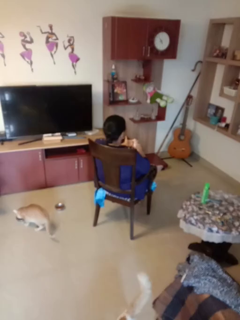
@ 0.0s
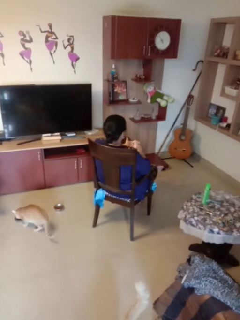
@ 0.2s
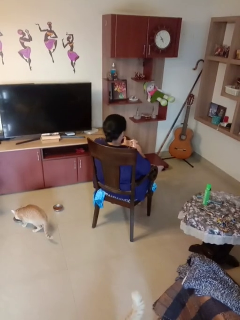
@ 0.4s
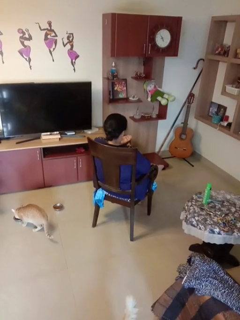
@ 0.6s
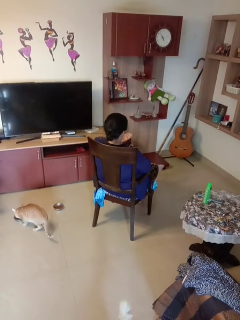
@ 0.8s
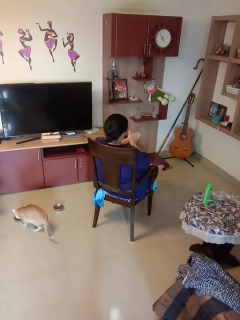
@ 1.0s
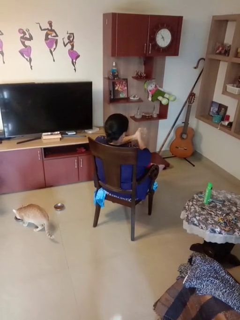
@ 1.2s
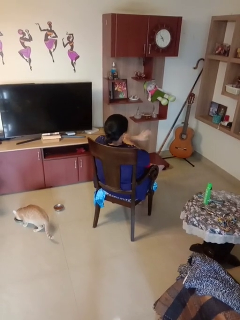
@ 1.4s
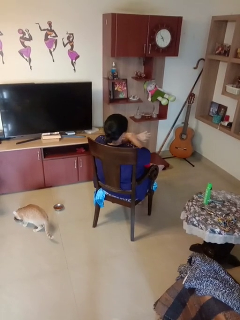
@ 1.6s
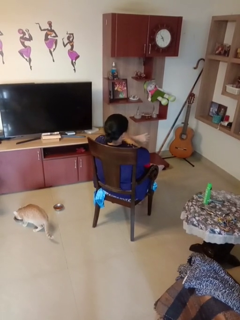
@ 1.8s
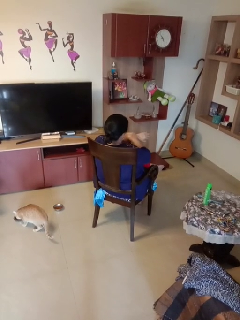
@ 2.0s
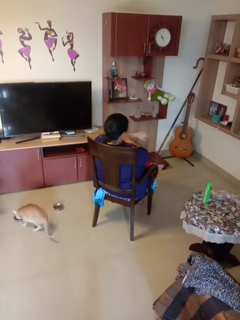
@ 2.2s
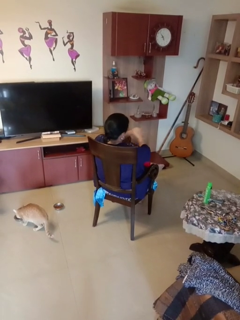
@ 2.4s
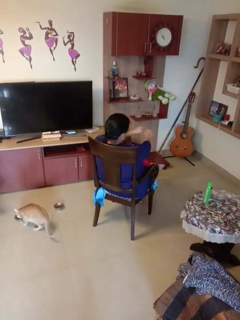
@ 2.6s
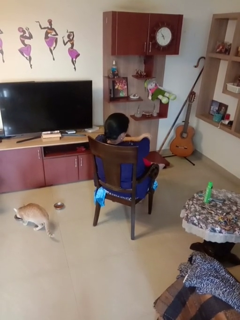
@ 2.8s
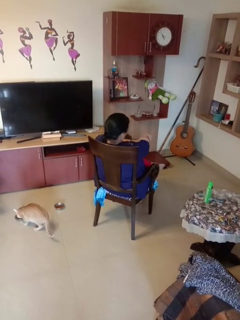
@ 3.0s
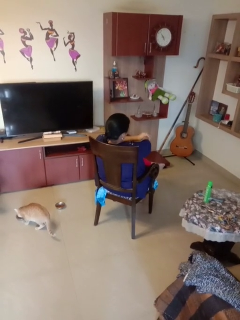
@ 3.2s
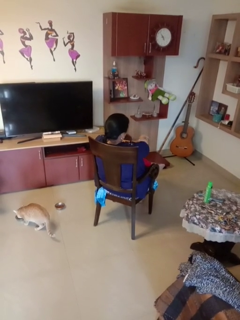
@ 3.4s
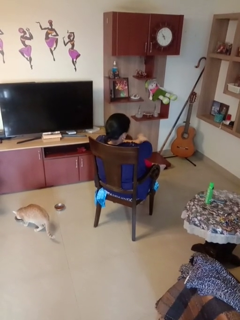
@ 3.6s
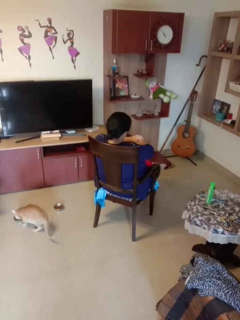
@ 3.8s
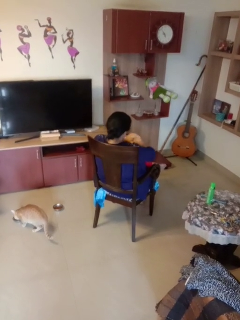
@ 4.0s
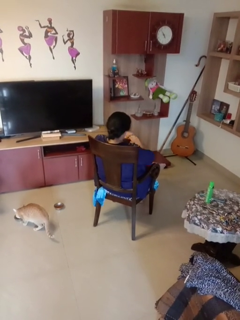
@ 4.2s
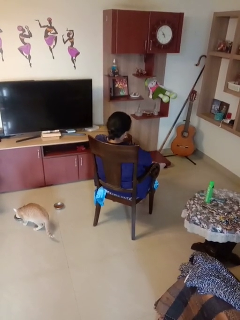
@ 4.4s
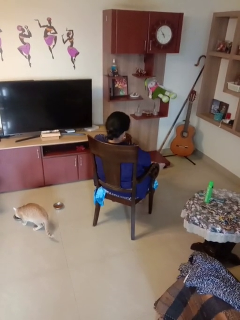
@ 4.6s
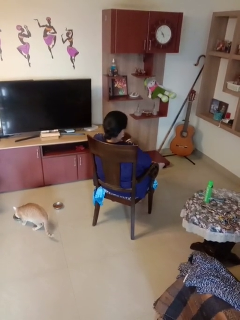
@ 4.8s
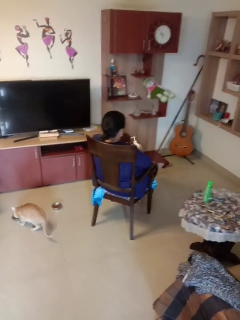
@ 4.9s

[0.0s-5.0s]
person applies sunscreen

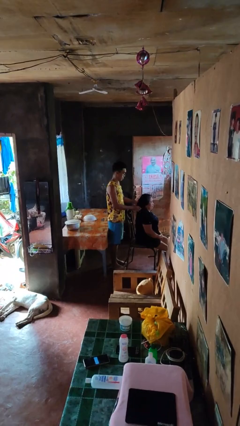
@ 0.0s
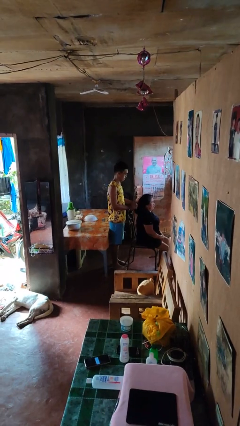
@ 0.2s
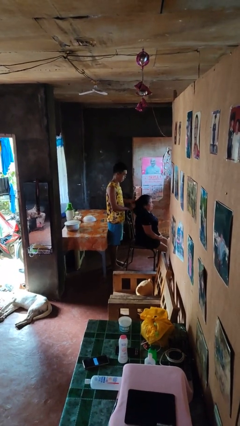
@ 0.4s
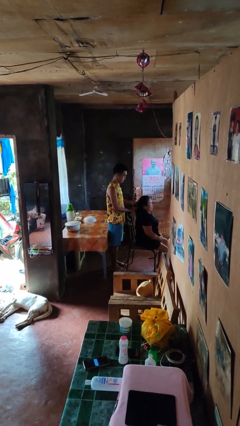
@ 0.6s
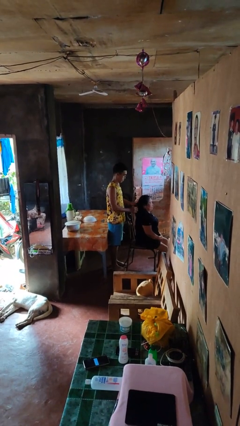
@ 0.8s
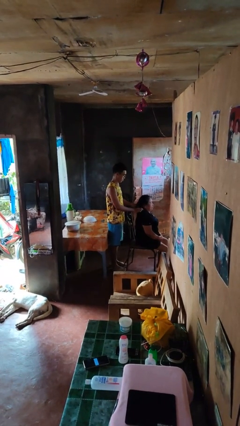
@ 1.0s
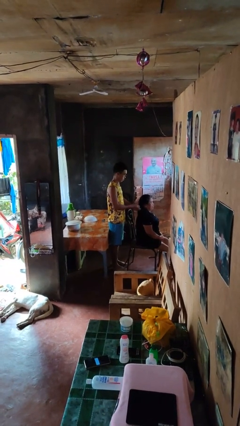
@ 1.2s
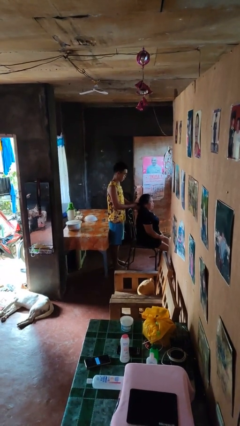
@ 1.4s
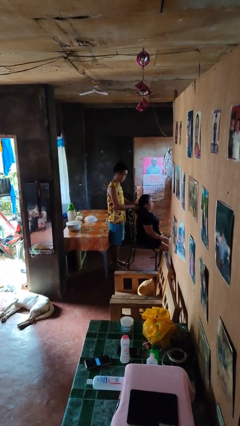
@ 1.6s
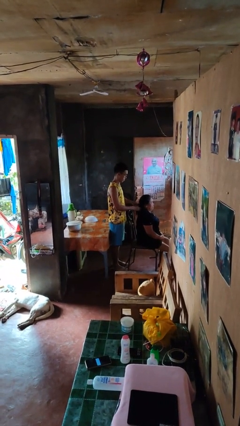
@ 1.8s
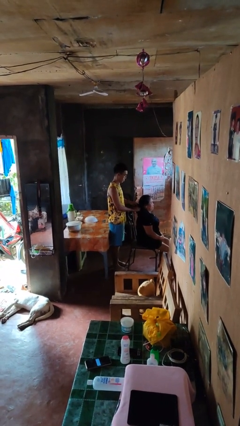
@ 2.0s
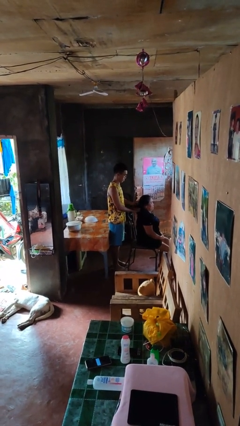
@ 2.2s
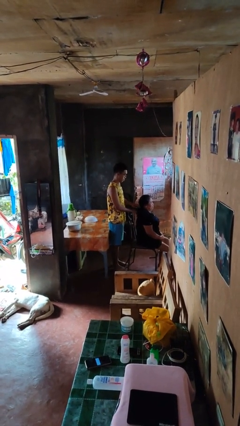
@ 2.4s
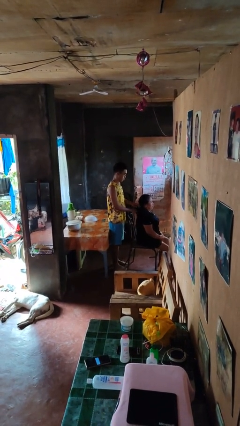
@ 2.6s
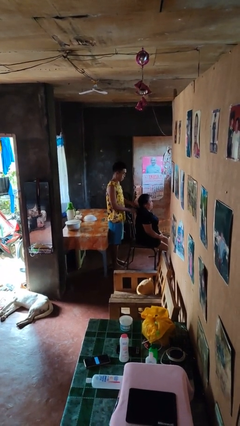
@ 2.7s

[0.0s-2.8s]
person braids hair of person

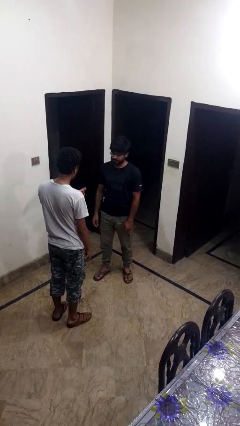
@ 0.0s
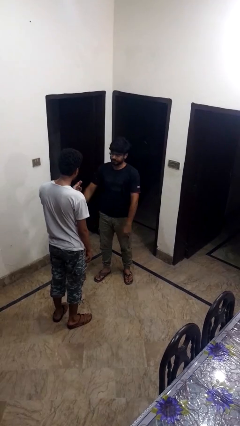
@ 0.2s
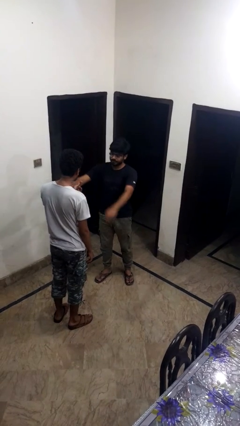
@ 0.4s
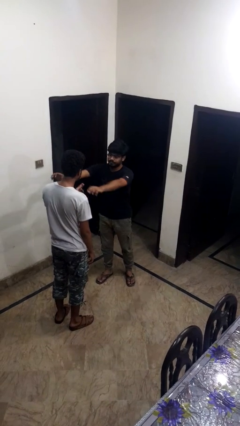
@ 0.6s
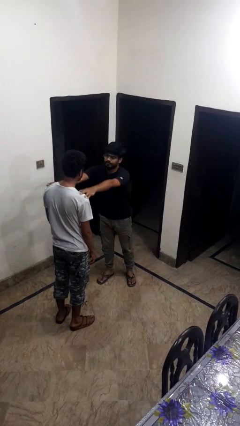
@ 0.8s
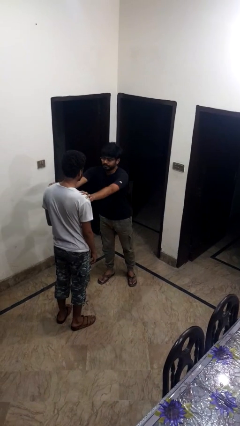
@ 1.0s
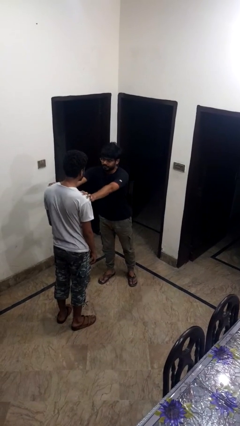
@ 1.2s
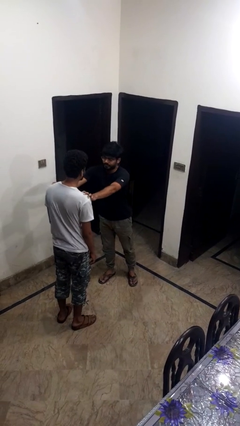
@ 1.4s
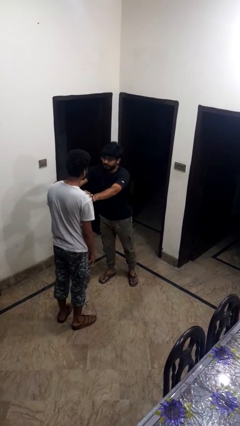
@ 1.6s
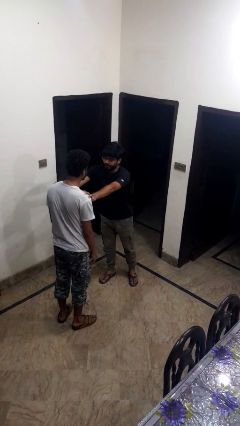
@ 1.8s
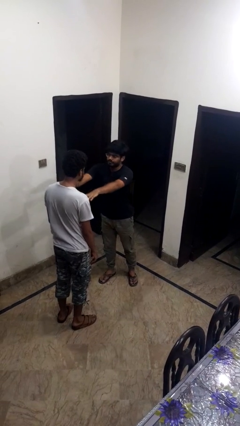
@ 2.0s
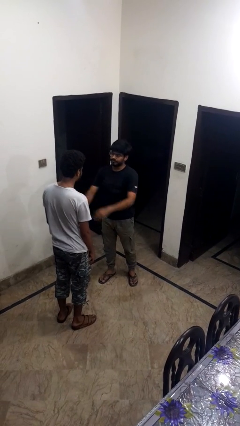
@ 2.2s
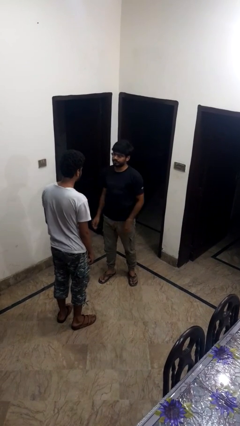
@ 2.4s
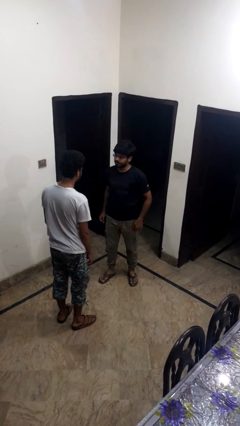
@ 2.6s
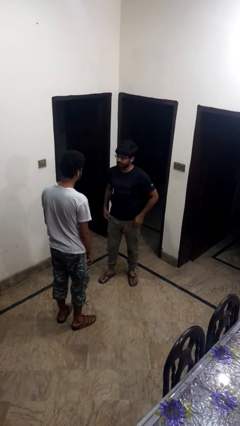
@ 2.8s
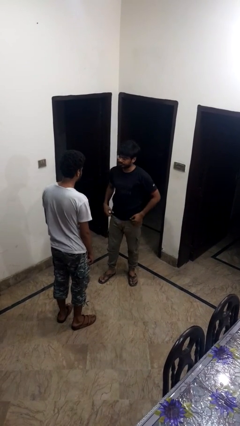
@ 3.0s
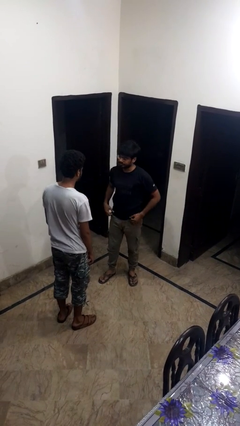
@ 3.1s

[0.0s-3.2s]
person kisses cheek of person

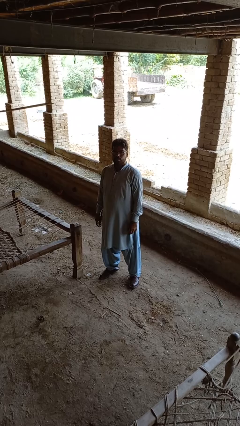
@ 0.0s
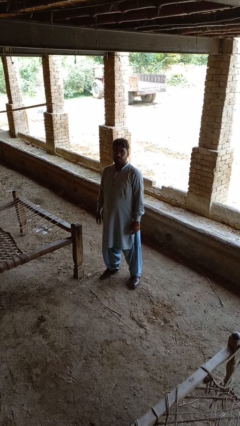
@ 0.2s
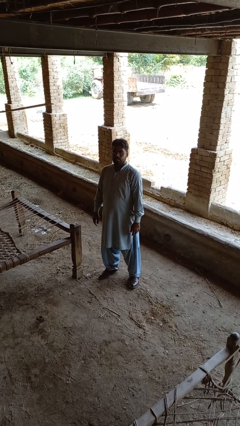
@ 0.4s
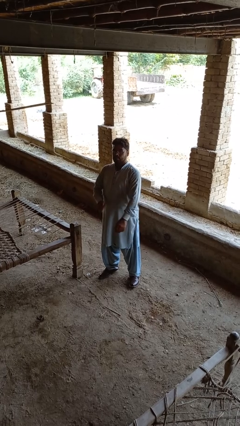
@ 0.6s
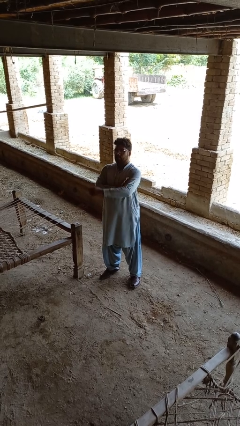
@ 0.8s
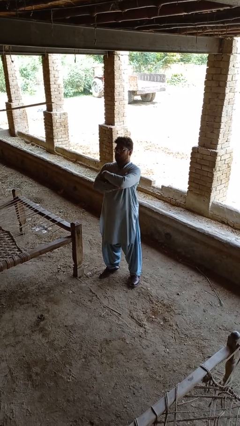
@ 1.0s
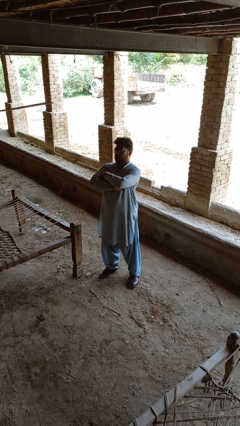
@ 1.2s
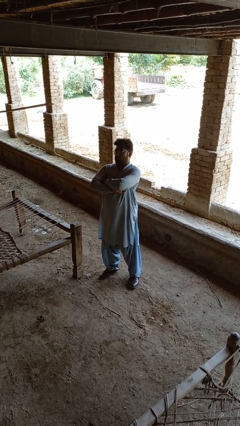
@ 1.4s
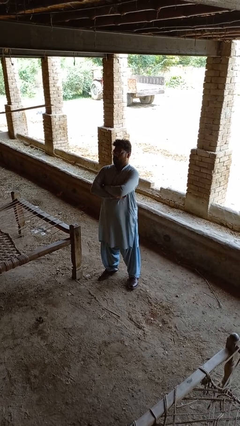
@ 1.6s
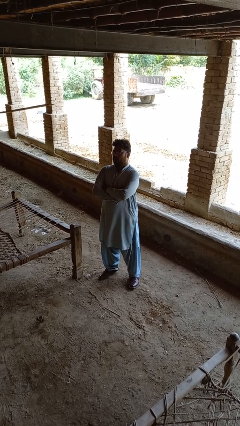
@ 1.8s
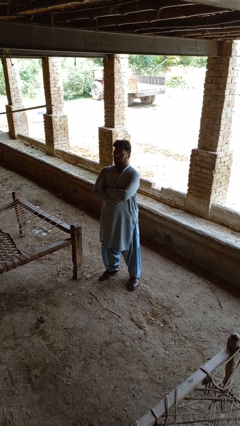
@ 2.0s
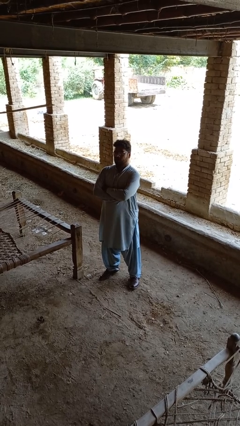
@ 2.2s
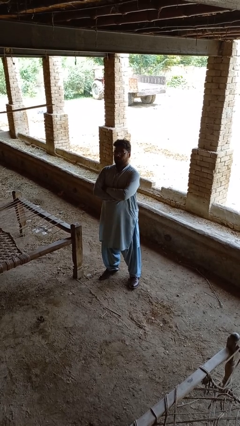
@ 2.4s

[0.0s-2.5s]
person crosses arms

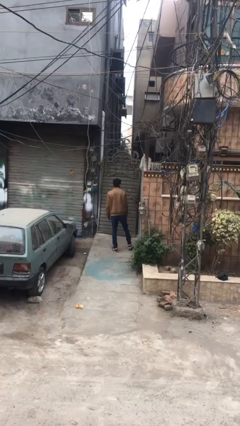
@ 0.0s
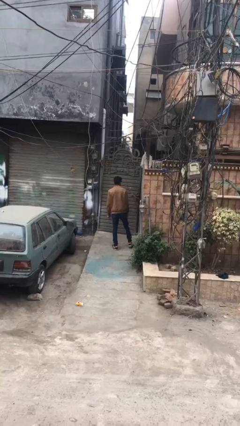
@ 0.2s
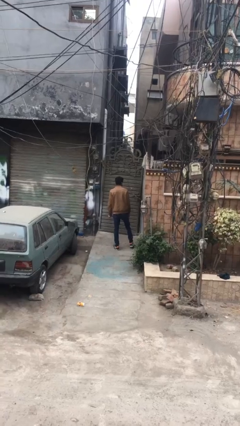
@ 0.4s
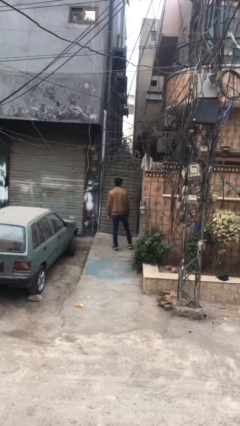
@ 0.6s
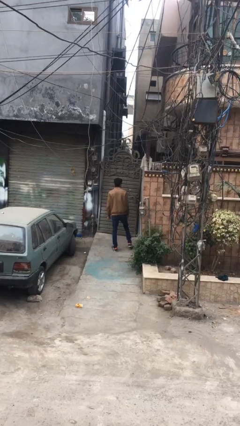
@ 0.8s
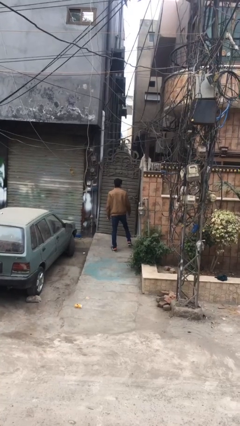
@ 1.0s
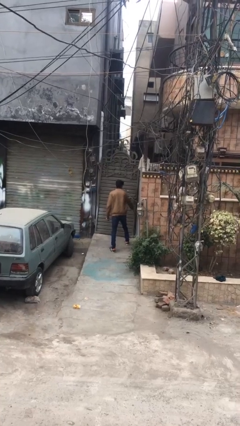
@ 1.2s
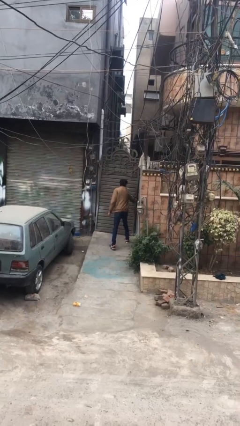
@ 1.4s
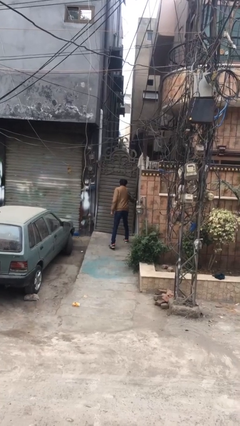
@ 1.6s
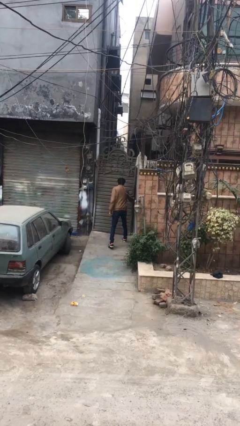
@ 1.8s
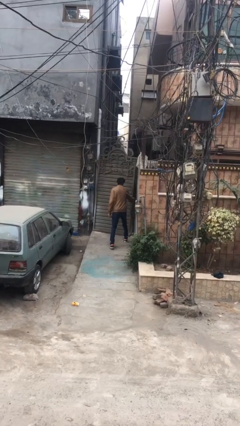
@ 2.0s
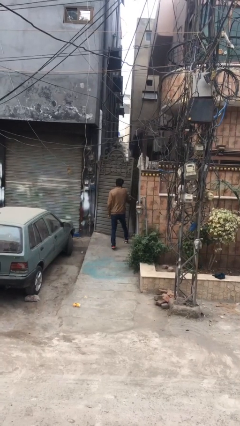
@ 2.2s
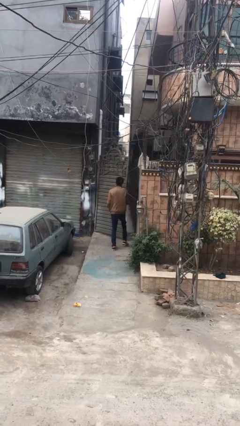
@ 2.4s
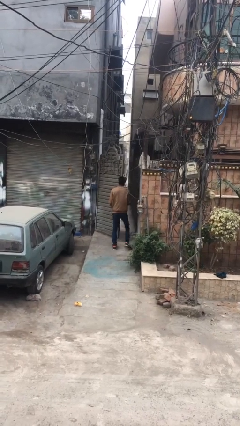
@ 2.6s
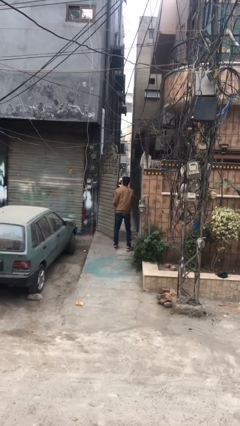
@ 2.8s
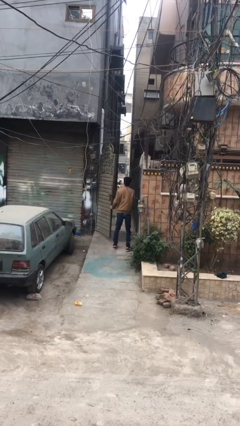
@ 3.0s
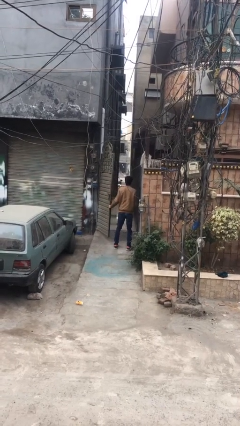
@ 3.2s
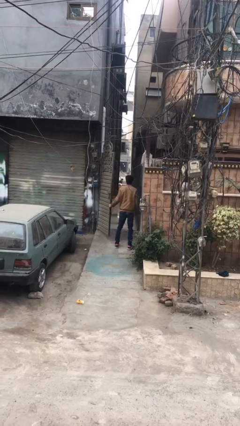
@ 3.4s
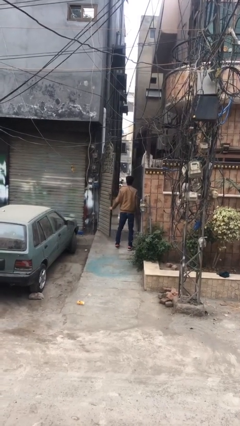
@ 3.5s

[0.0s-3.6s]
person opens facility door

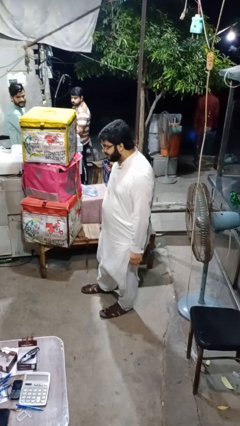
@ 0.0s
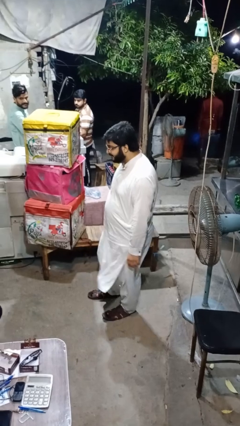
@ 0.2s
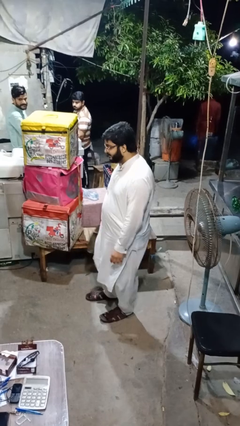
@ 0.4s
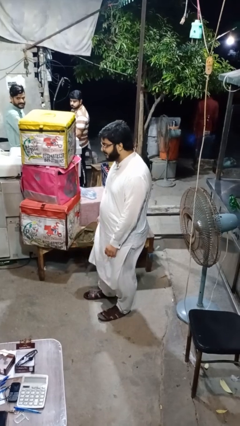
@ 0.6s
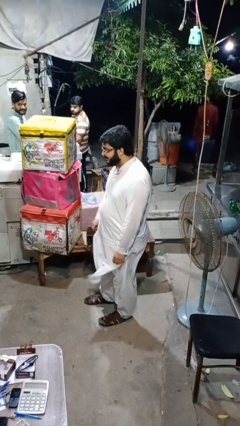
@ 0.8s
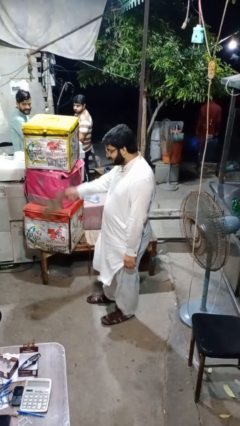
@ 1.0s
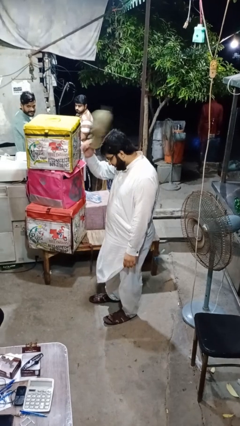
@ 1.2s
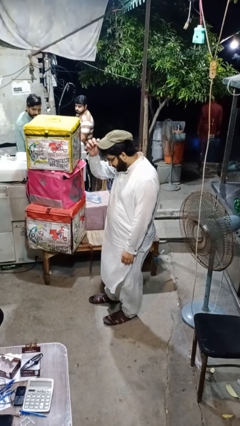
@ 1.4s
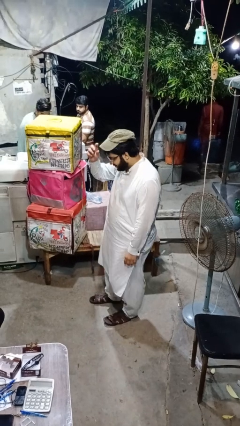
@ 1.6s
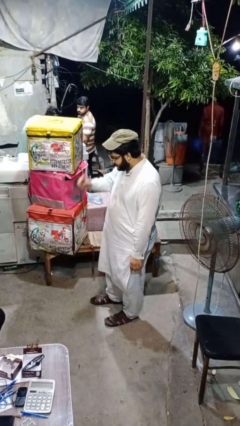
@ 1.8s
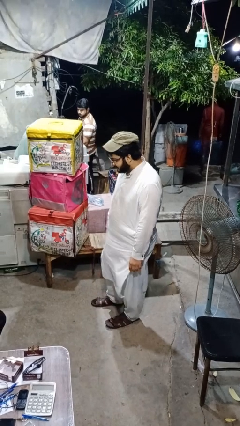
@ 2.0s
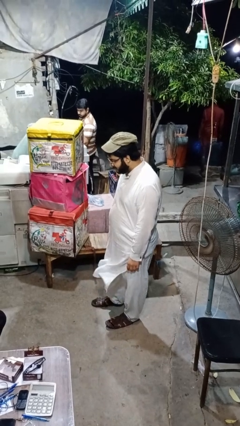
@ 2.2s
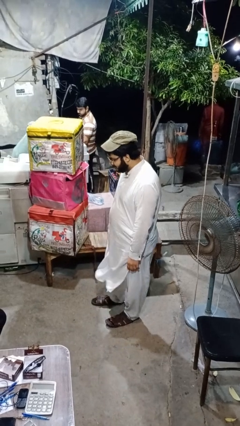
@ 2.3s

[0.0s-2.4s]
person puts on hat
